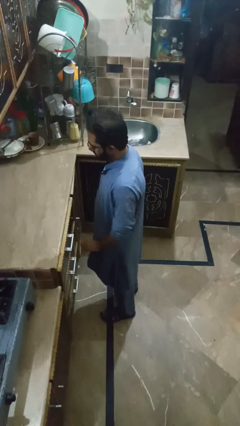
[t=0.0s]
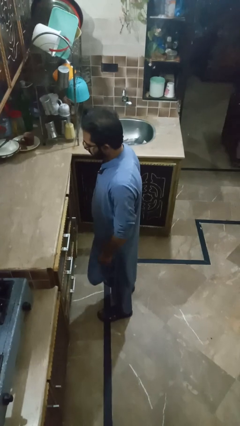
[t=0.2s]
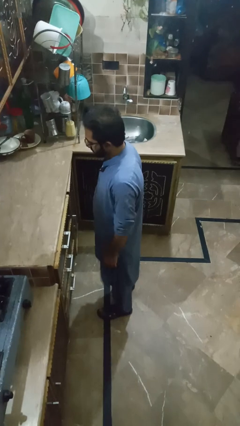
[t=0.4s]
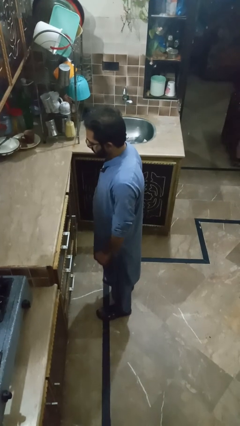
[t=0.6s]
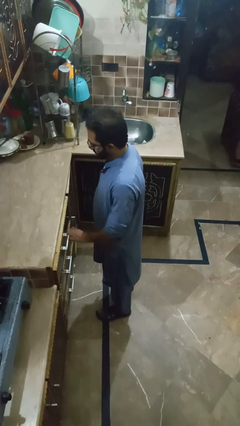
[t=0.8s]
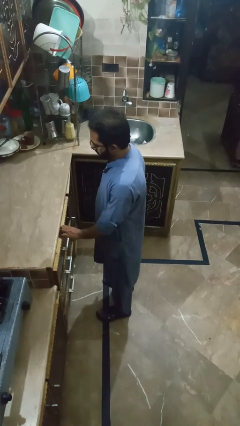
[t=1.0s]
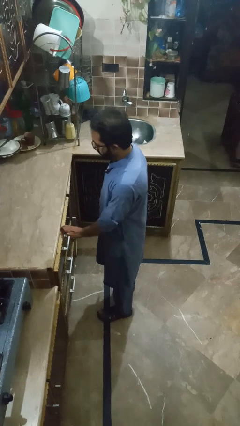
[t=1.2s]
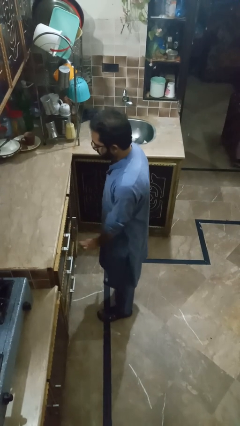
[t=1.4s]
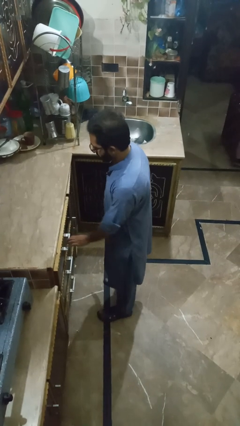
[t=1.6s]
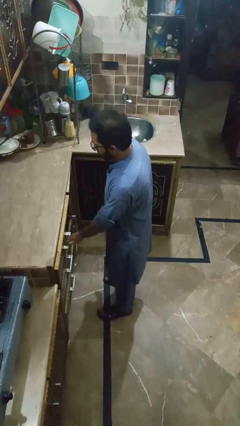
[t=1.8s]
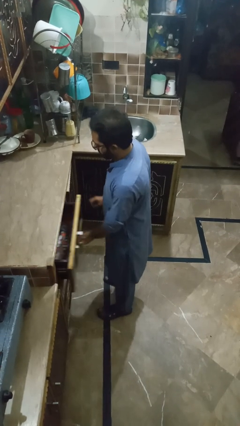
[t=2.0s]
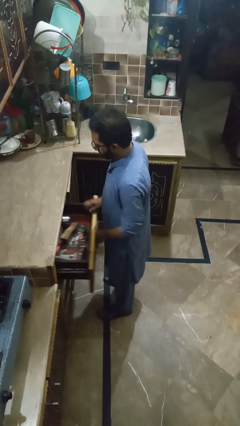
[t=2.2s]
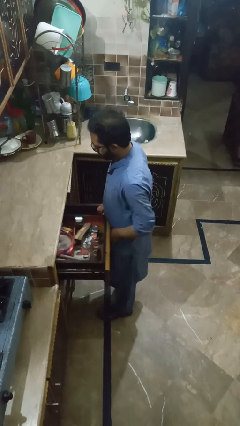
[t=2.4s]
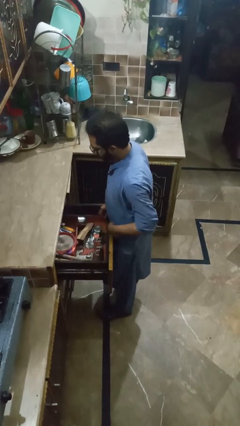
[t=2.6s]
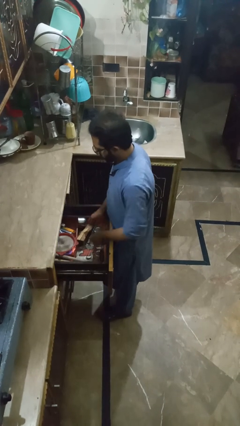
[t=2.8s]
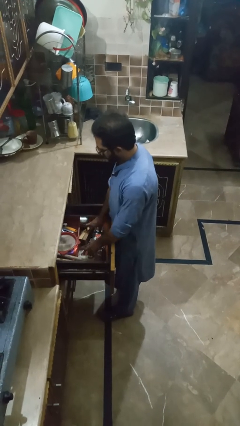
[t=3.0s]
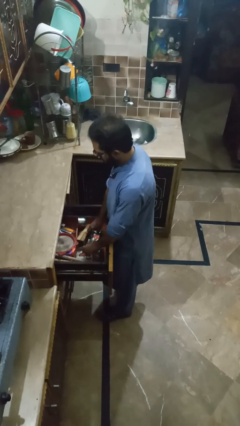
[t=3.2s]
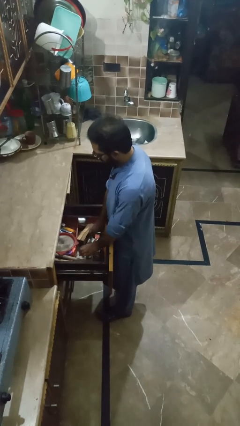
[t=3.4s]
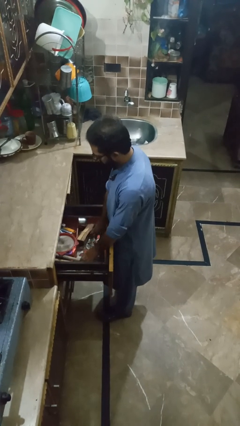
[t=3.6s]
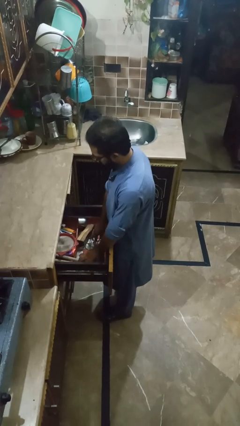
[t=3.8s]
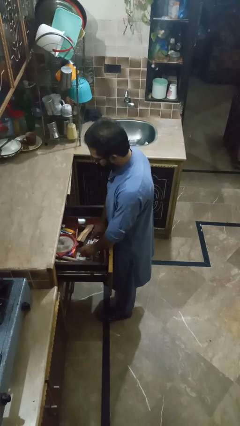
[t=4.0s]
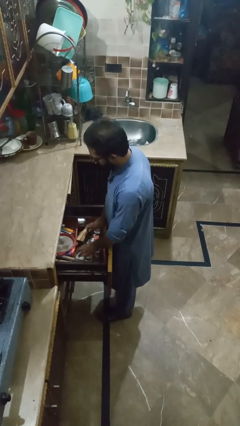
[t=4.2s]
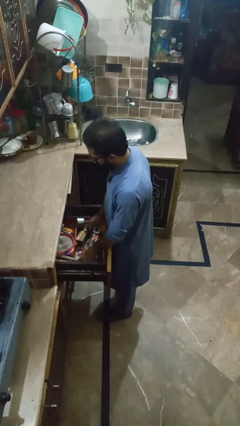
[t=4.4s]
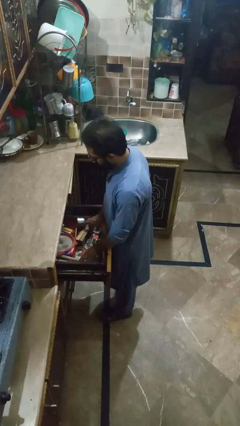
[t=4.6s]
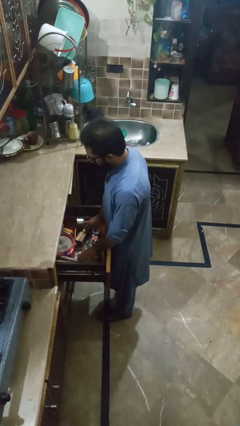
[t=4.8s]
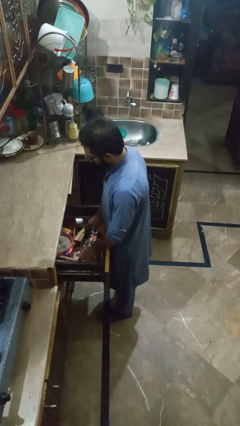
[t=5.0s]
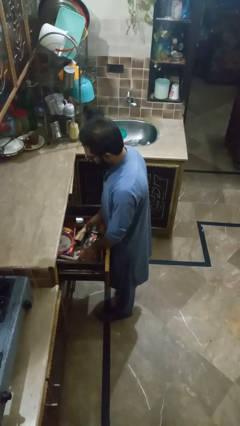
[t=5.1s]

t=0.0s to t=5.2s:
person searches in kitchen drawer

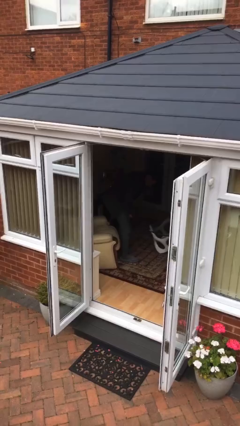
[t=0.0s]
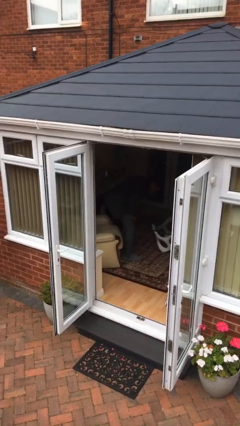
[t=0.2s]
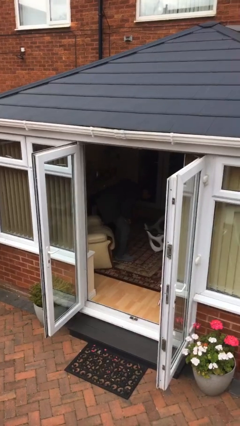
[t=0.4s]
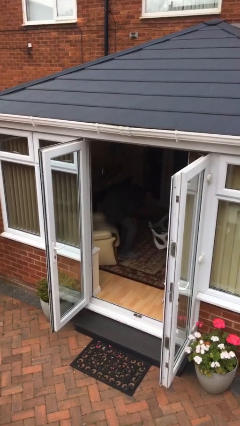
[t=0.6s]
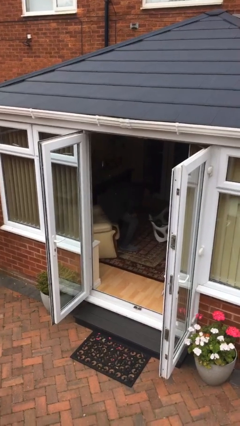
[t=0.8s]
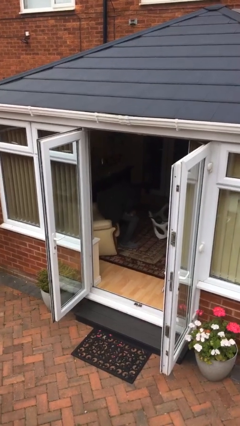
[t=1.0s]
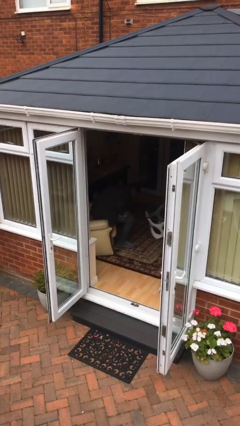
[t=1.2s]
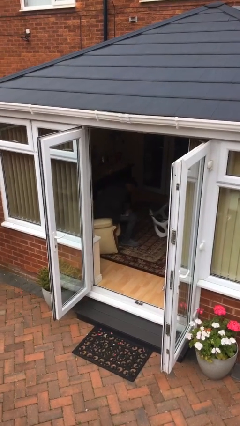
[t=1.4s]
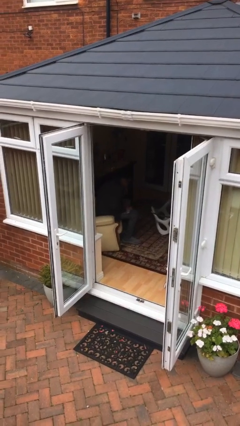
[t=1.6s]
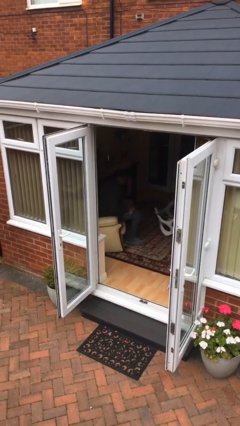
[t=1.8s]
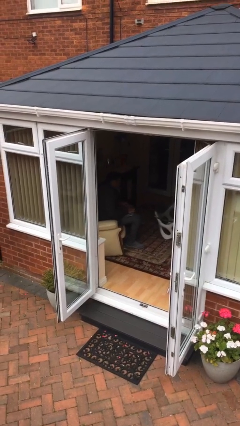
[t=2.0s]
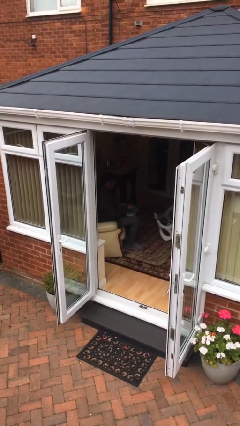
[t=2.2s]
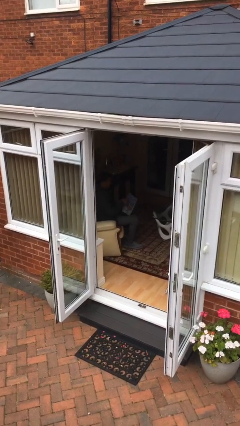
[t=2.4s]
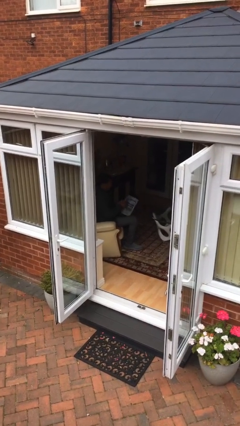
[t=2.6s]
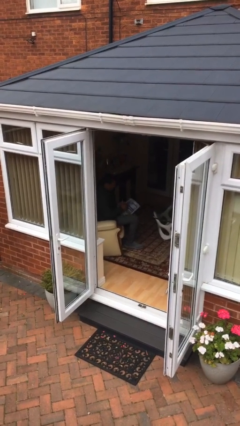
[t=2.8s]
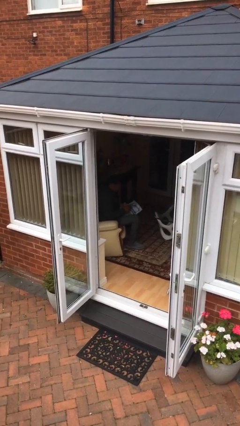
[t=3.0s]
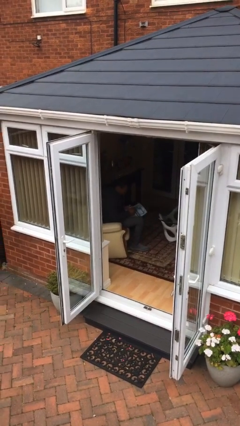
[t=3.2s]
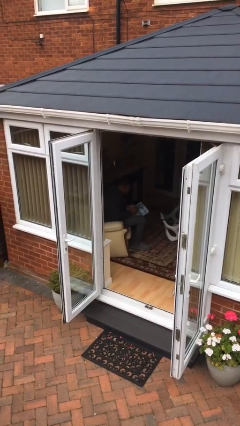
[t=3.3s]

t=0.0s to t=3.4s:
person sits down

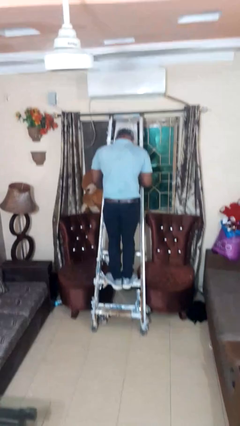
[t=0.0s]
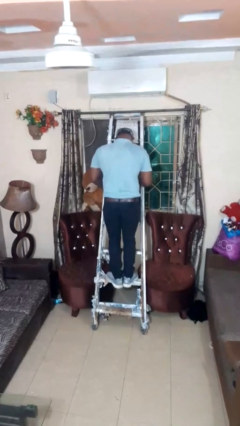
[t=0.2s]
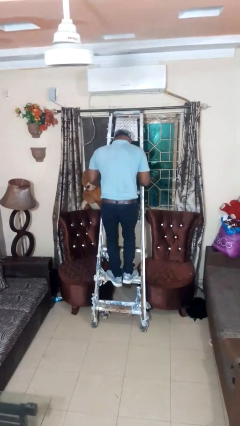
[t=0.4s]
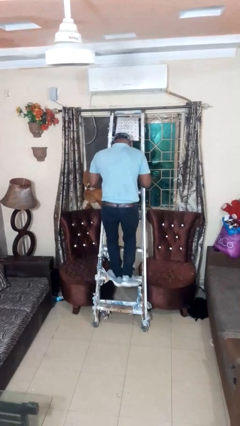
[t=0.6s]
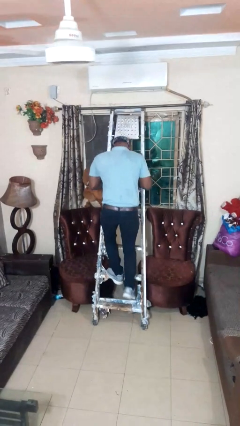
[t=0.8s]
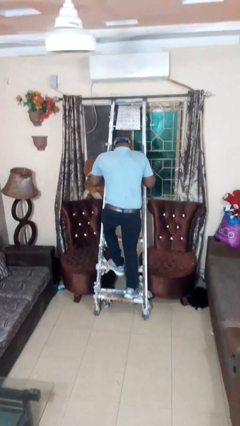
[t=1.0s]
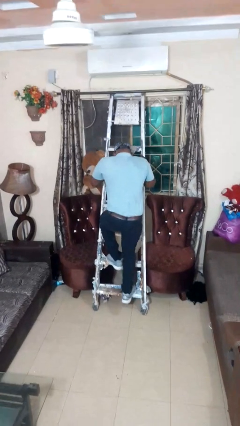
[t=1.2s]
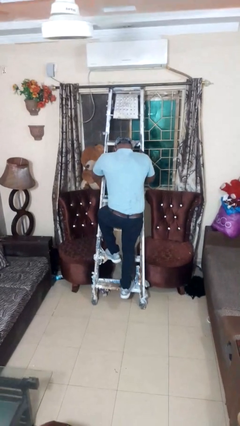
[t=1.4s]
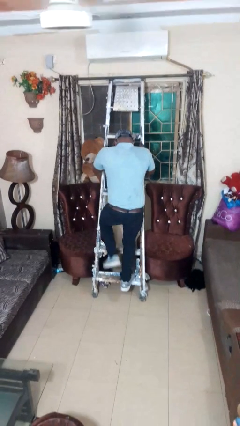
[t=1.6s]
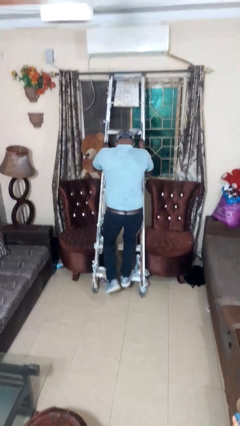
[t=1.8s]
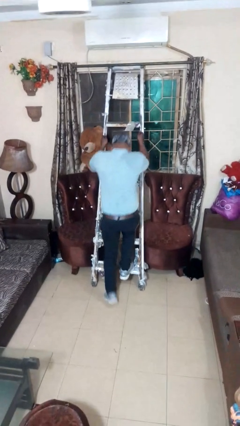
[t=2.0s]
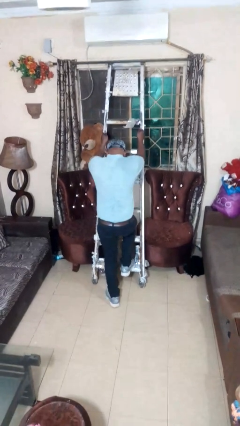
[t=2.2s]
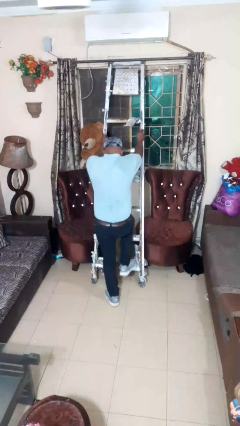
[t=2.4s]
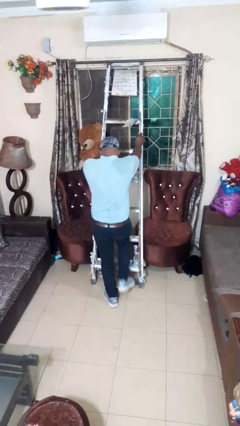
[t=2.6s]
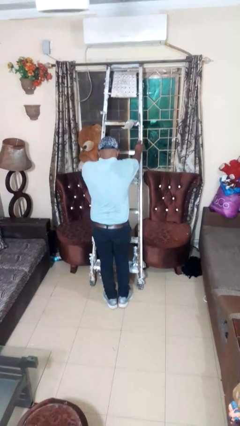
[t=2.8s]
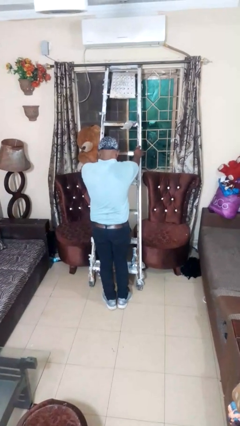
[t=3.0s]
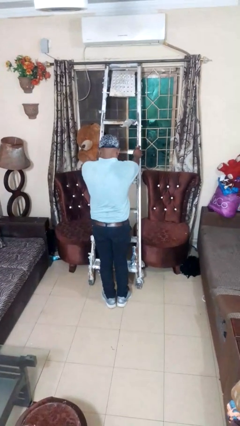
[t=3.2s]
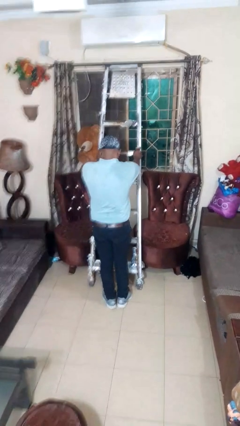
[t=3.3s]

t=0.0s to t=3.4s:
person climbs down ladder

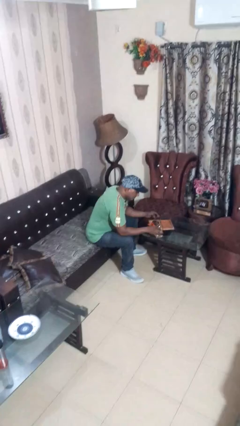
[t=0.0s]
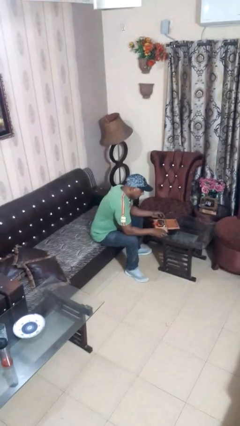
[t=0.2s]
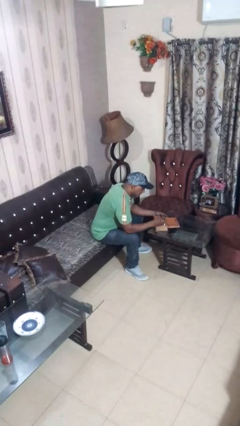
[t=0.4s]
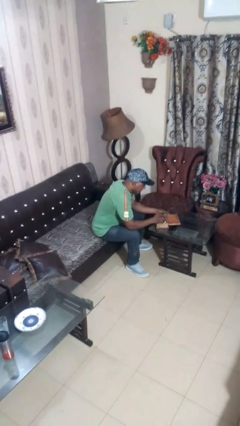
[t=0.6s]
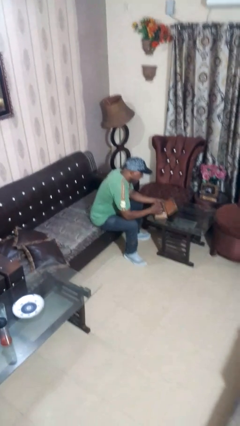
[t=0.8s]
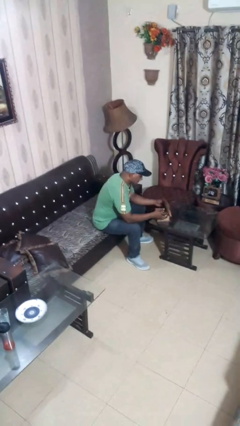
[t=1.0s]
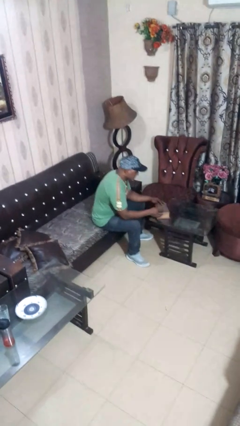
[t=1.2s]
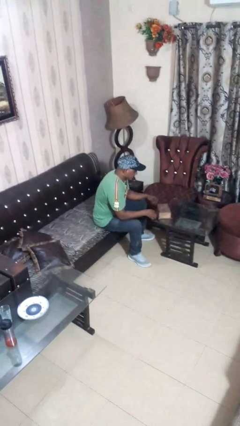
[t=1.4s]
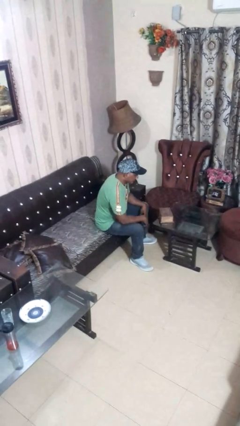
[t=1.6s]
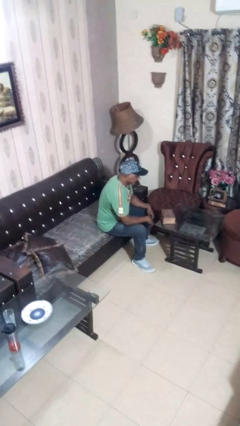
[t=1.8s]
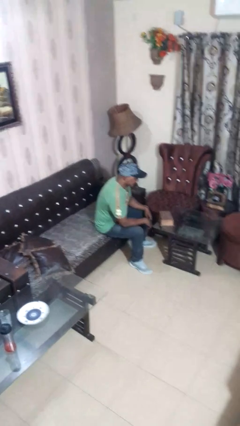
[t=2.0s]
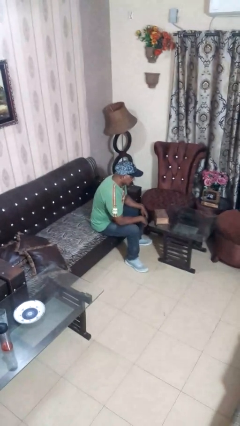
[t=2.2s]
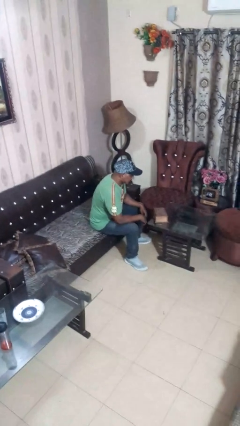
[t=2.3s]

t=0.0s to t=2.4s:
person closes jewelry box

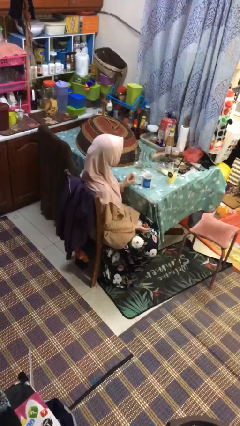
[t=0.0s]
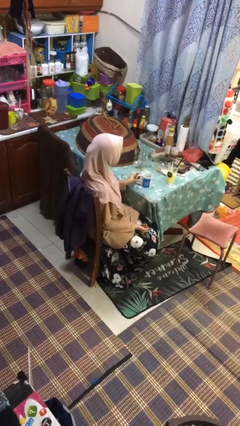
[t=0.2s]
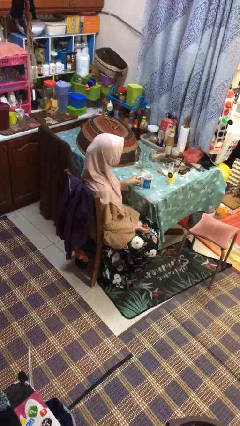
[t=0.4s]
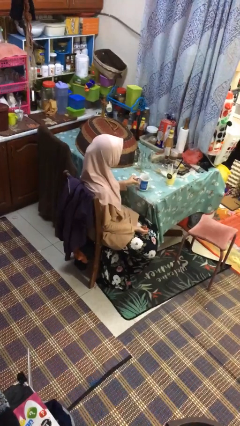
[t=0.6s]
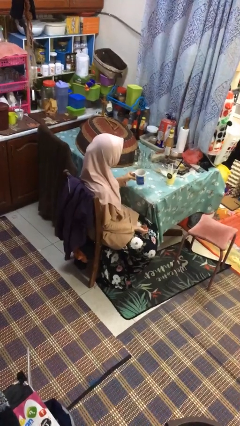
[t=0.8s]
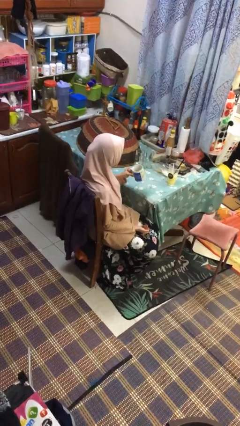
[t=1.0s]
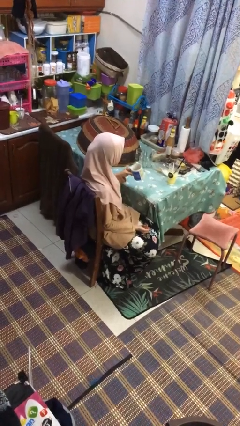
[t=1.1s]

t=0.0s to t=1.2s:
person picks up object from table

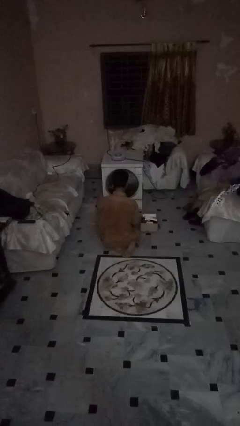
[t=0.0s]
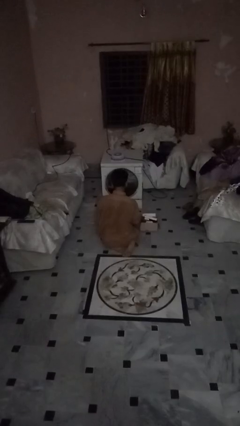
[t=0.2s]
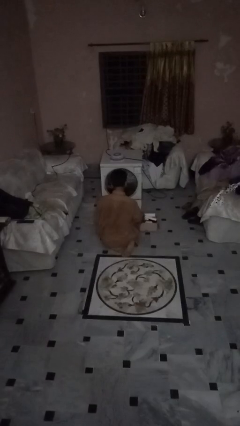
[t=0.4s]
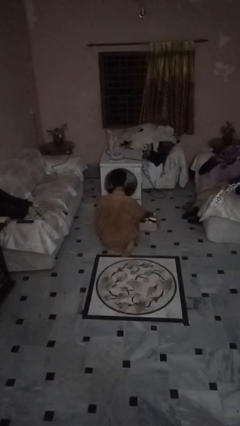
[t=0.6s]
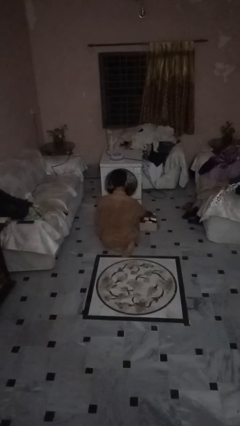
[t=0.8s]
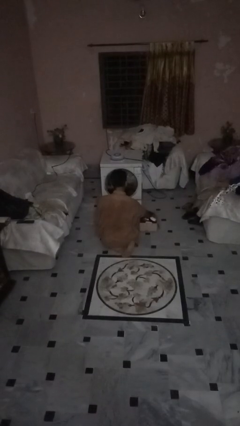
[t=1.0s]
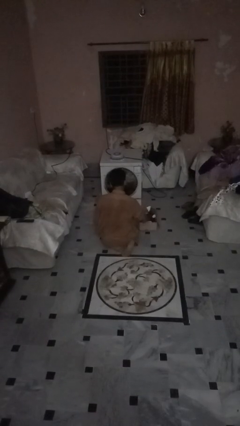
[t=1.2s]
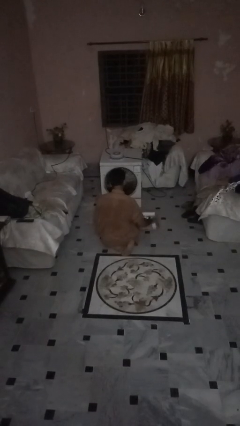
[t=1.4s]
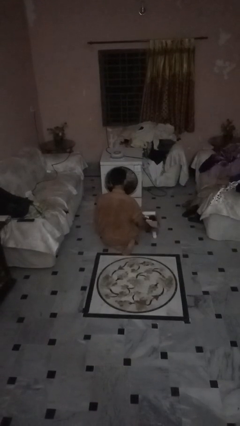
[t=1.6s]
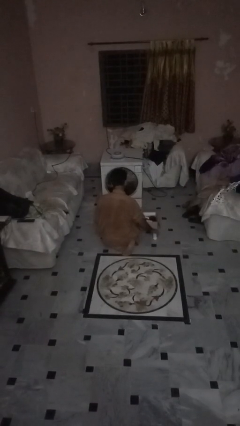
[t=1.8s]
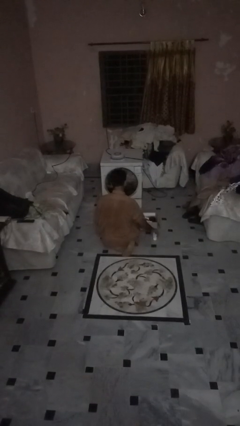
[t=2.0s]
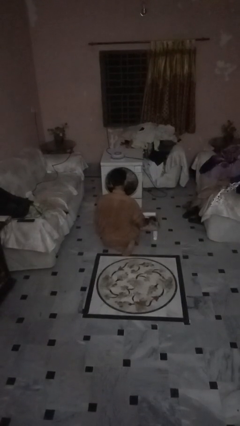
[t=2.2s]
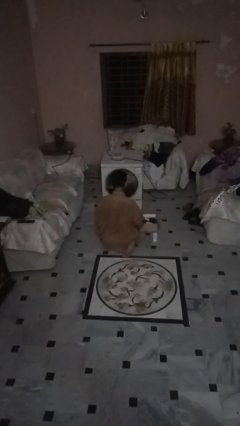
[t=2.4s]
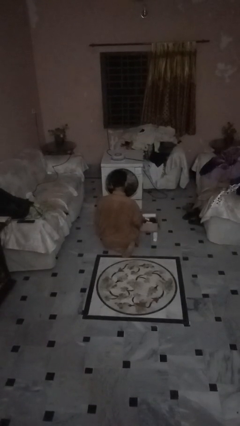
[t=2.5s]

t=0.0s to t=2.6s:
person unloads box onto floor
